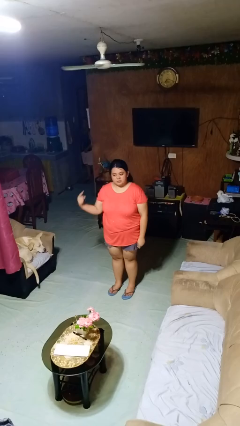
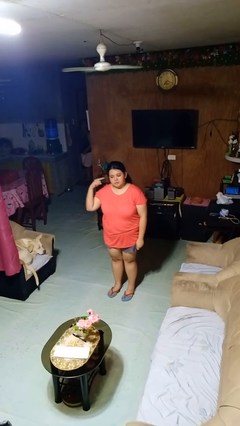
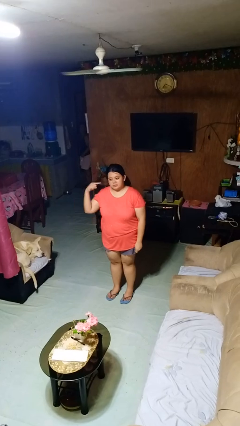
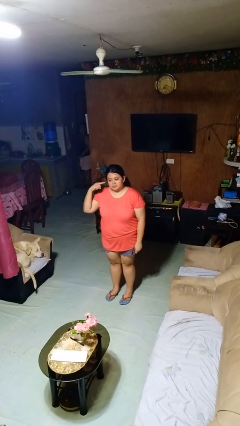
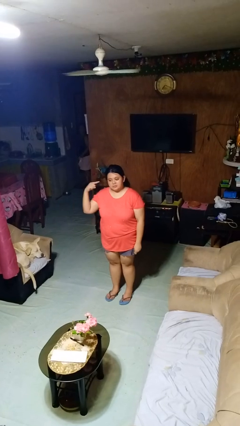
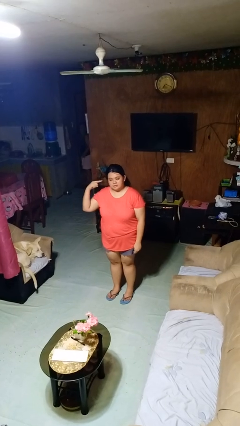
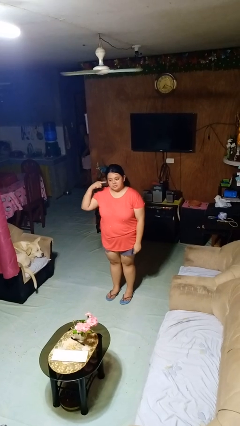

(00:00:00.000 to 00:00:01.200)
person gestures listen closely

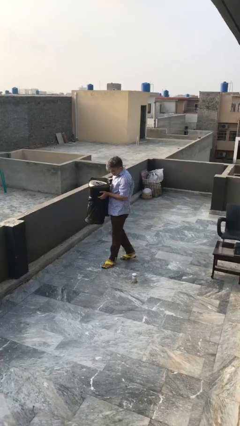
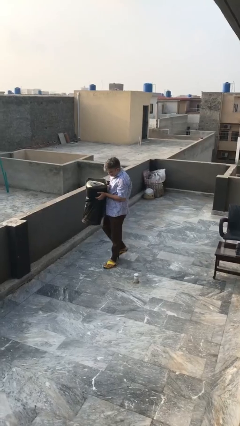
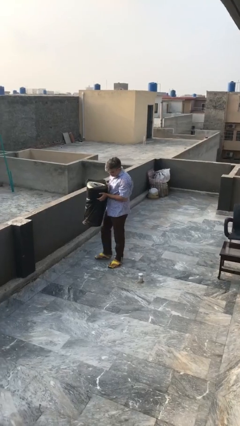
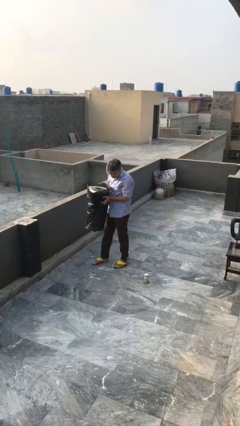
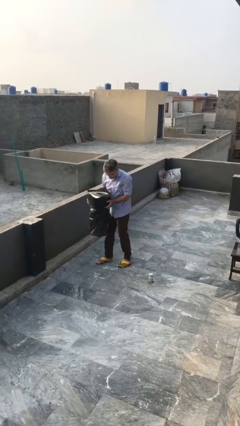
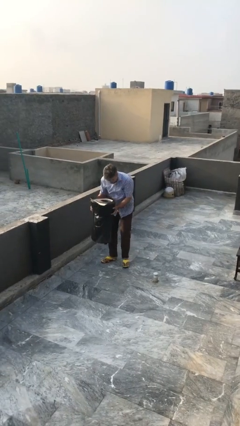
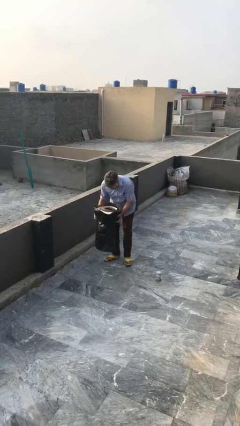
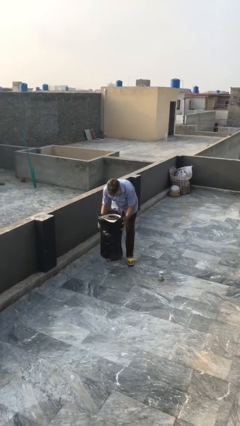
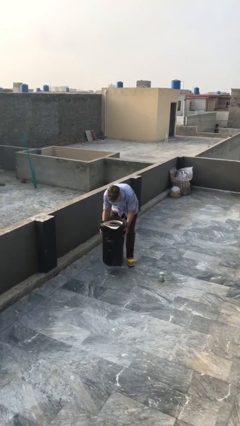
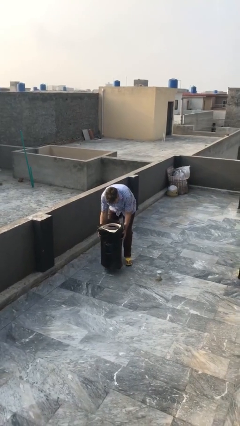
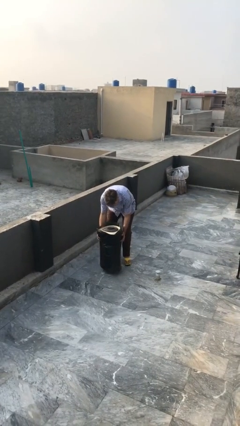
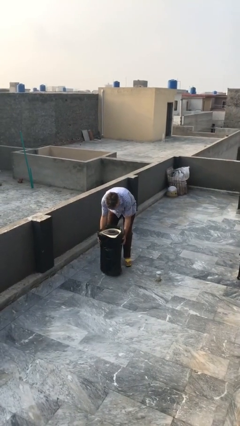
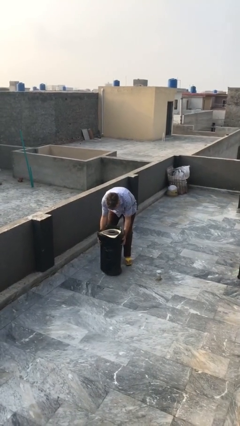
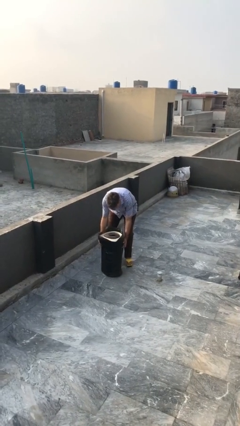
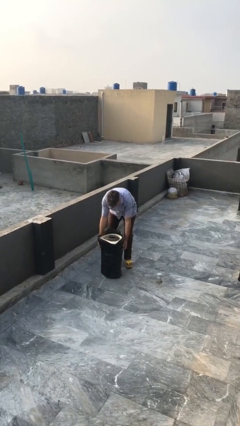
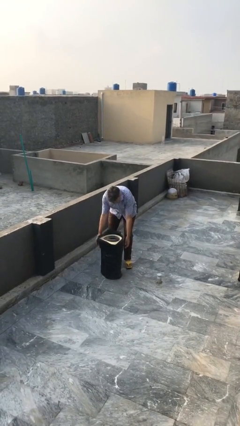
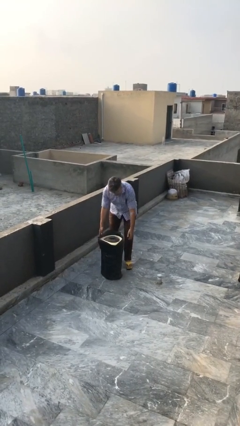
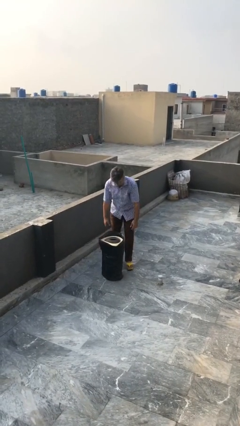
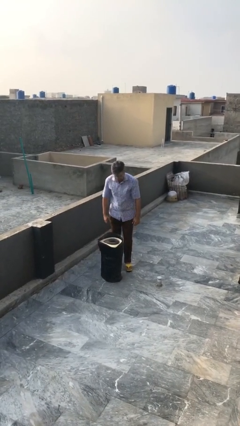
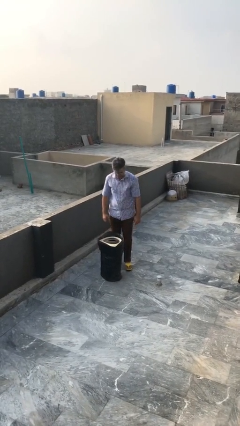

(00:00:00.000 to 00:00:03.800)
person puts down object on floor

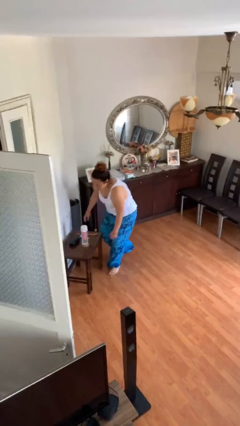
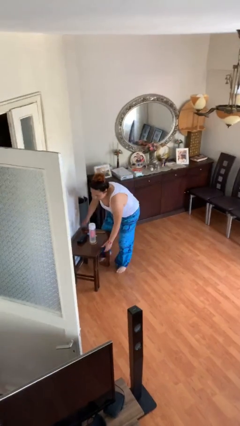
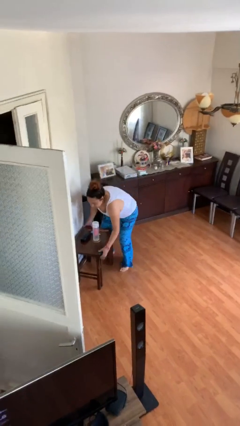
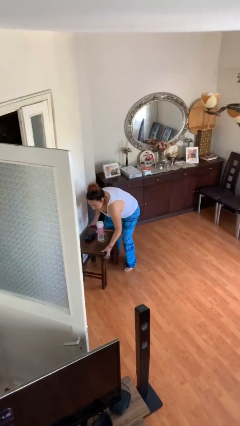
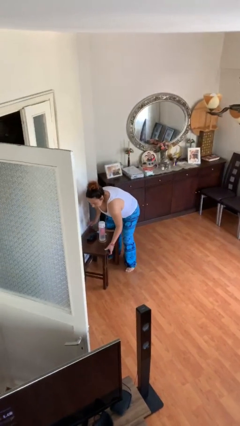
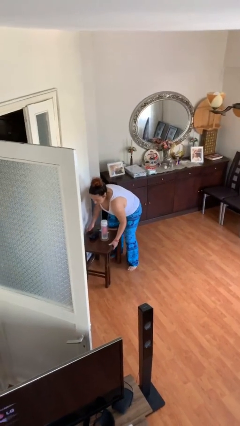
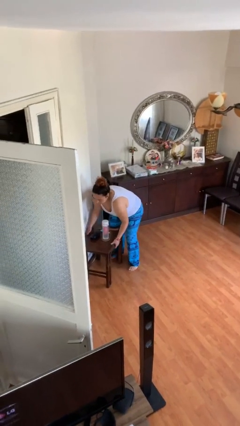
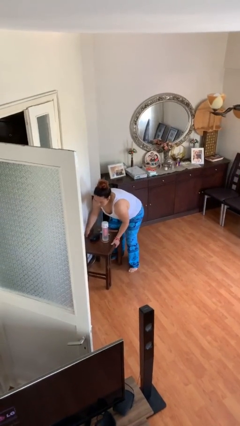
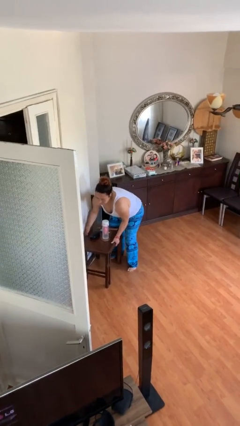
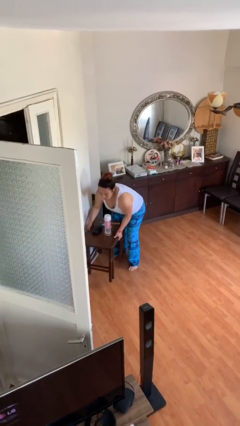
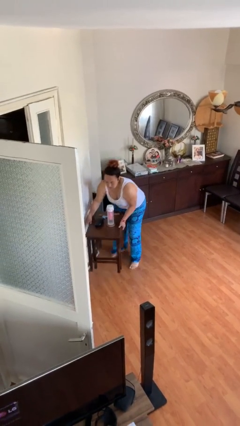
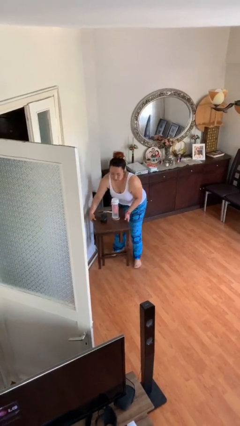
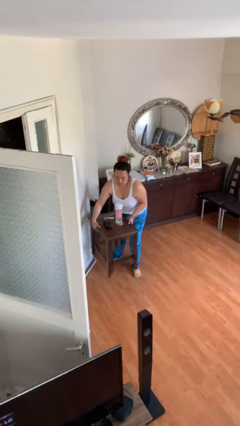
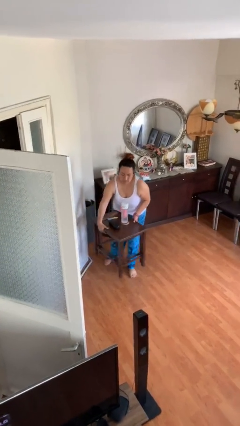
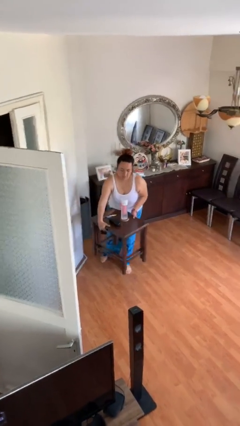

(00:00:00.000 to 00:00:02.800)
person picks up object from floor

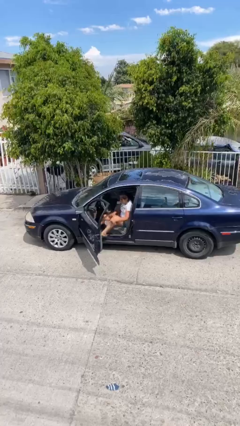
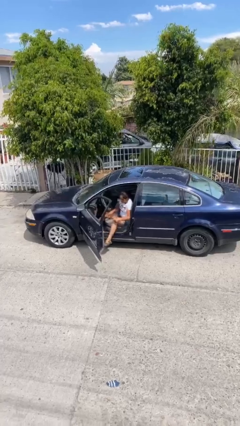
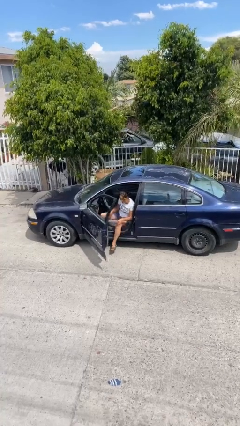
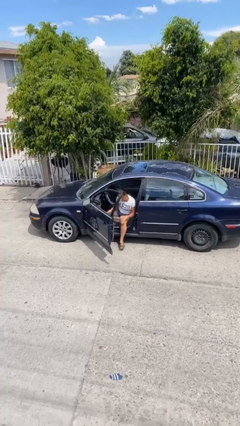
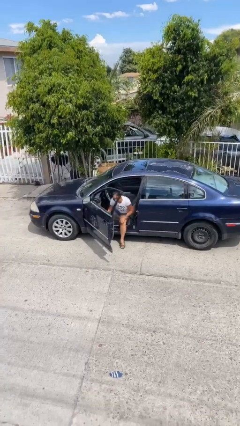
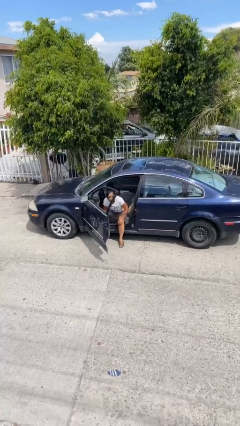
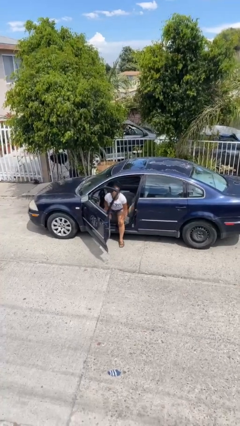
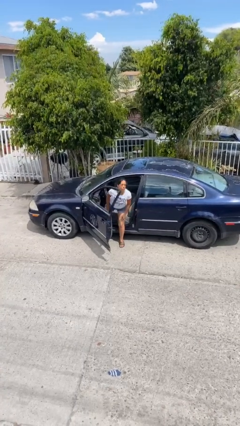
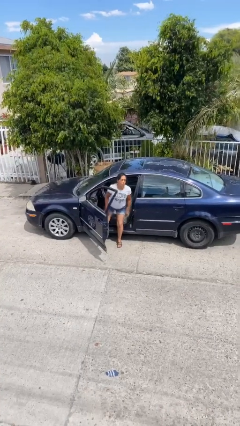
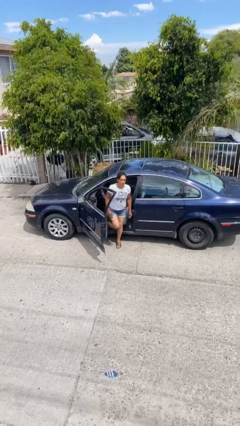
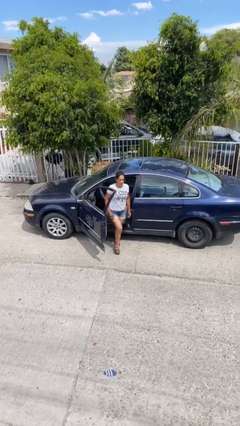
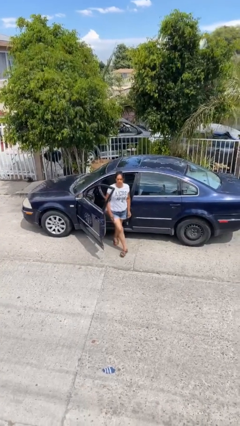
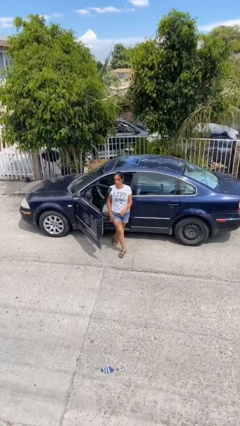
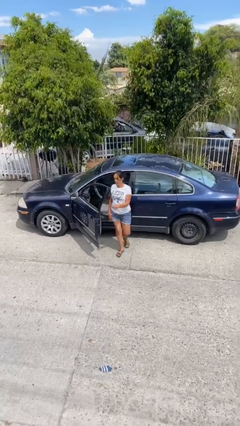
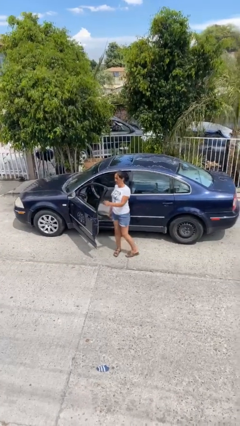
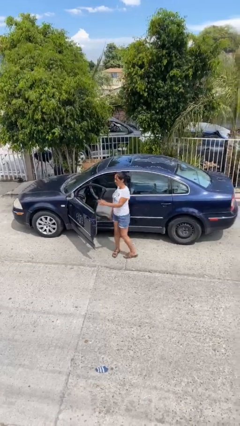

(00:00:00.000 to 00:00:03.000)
person exits car

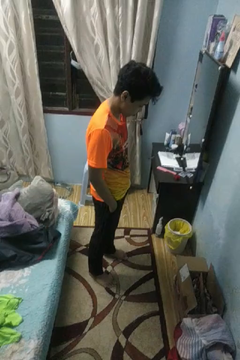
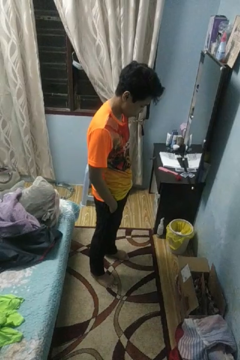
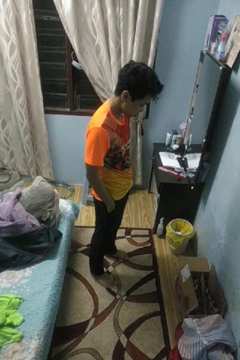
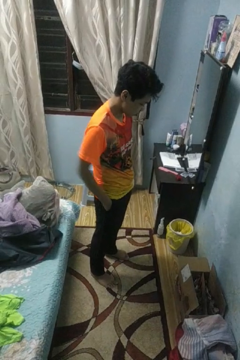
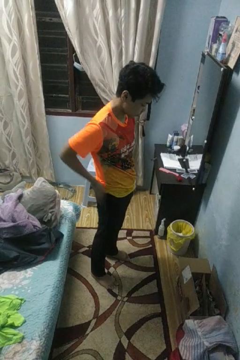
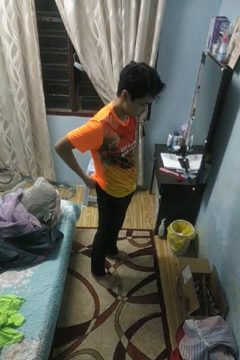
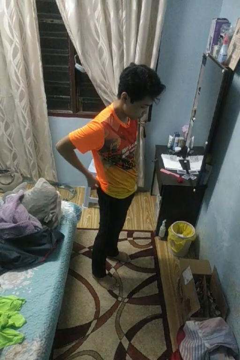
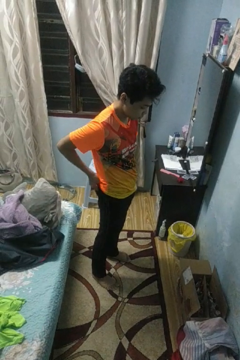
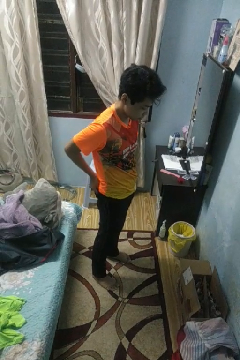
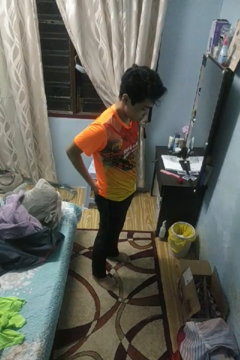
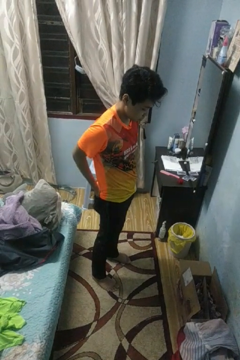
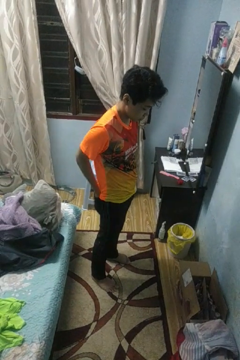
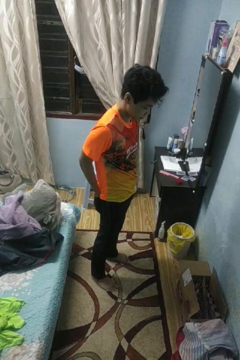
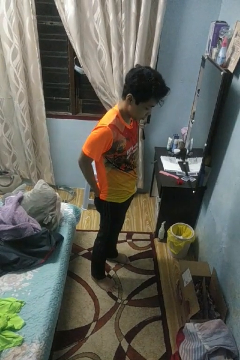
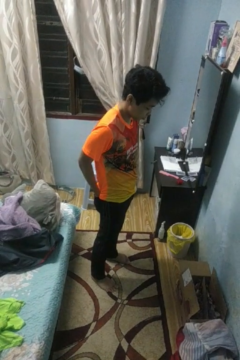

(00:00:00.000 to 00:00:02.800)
person puts hands in back pockets

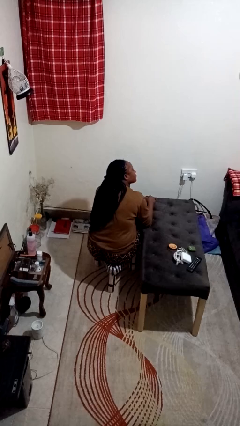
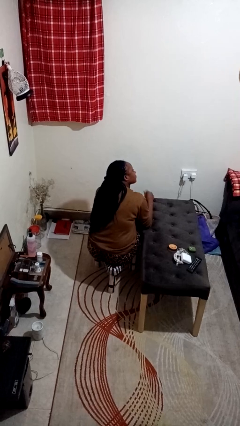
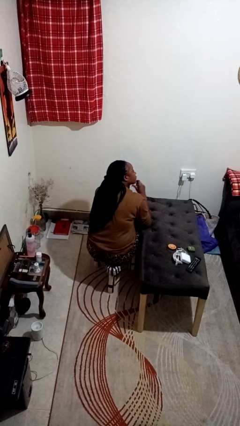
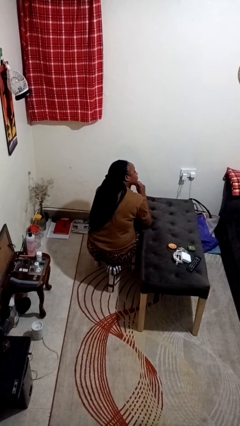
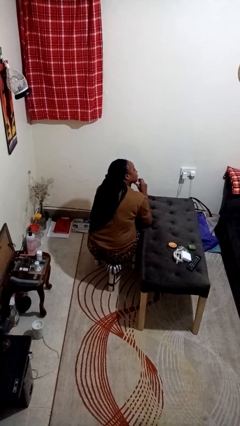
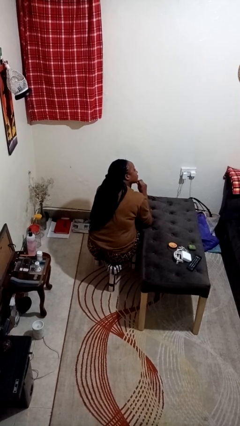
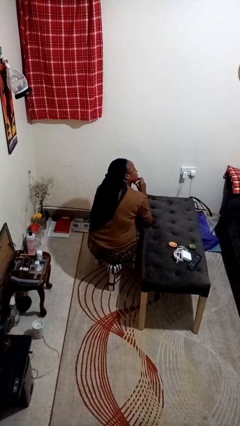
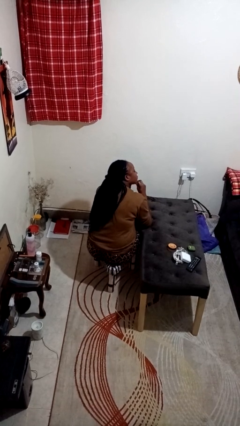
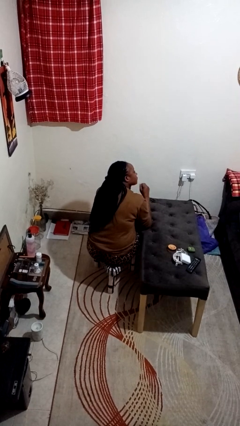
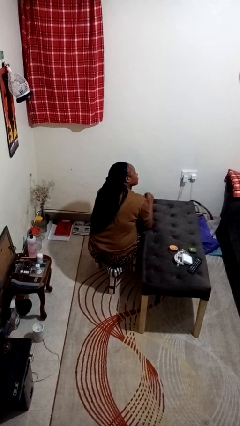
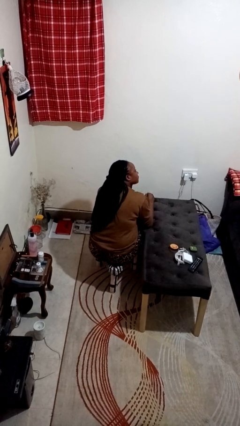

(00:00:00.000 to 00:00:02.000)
person strokes chin

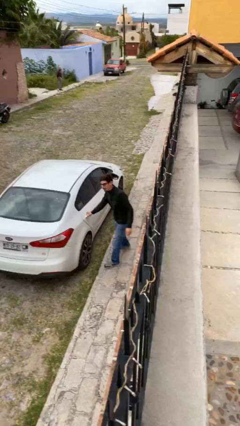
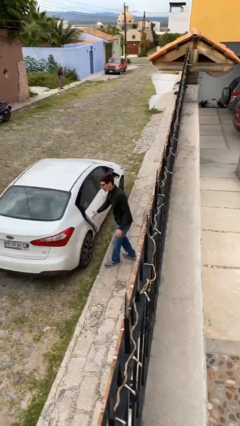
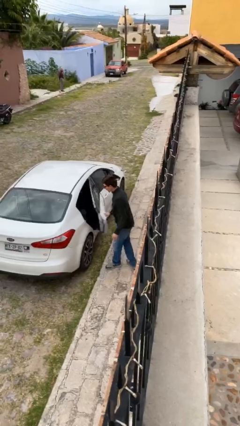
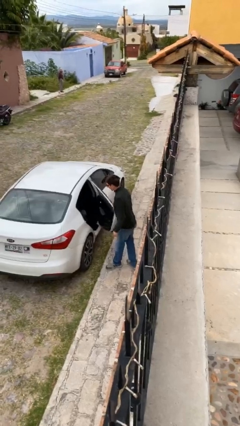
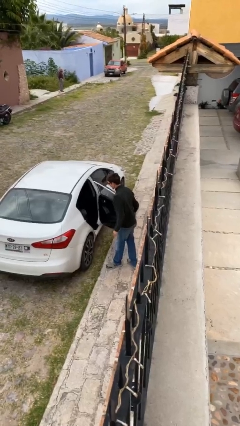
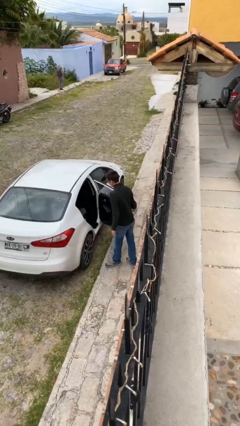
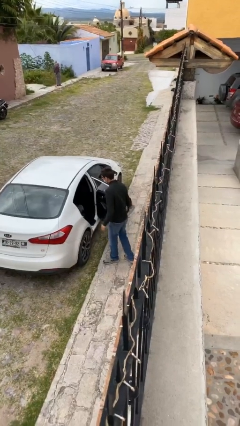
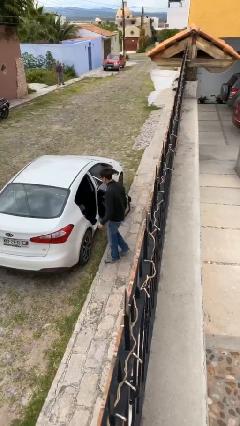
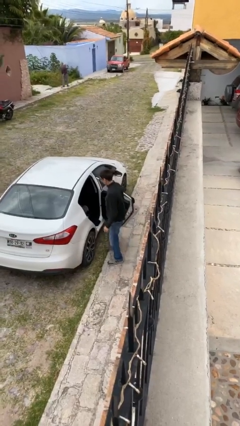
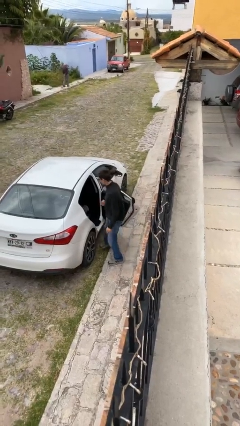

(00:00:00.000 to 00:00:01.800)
person opens car door
